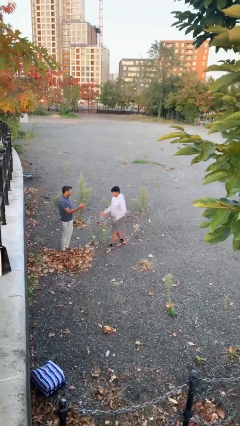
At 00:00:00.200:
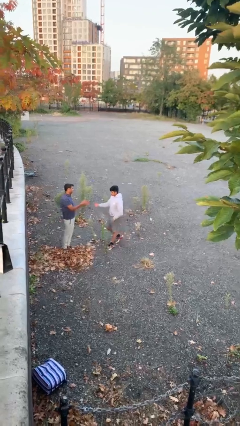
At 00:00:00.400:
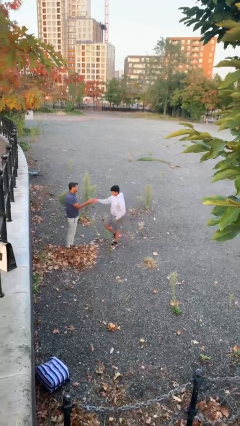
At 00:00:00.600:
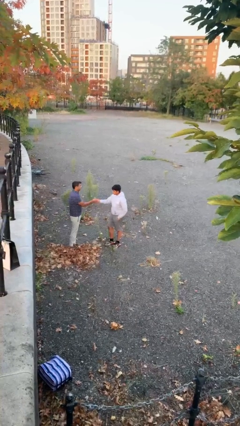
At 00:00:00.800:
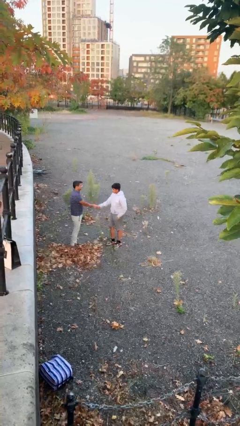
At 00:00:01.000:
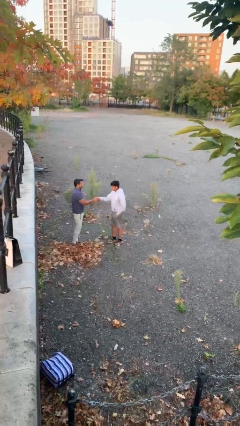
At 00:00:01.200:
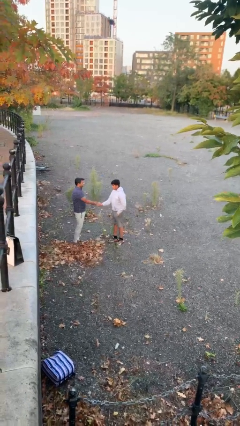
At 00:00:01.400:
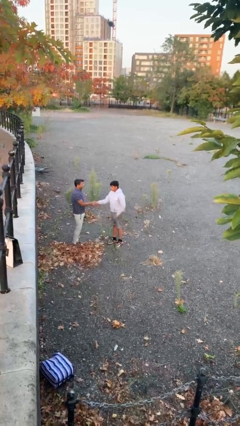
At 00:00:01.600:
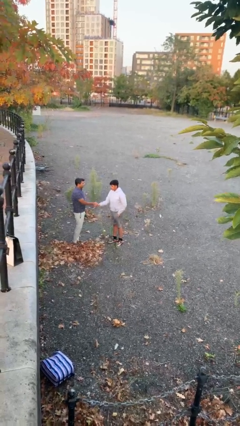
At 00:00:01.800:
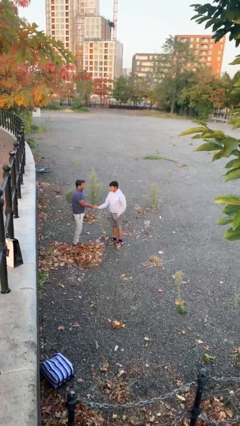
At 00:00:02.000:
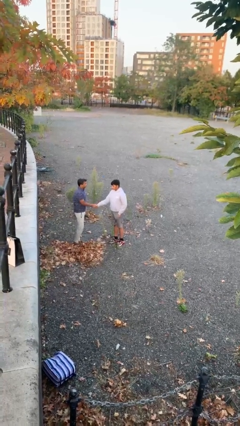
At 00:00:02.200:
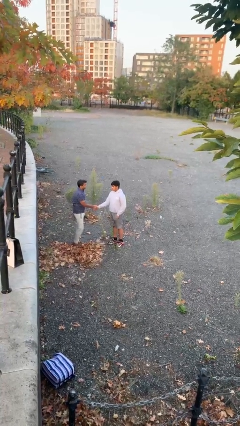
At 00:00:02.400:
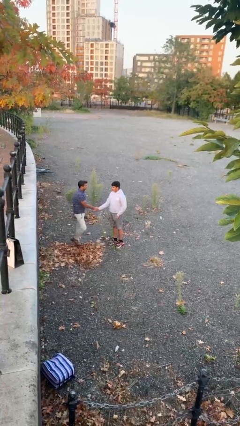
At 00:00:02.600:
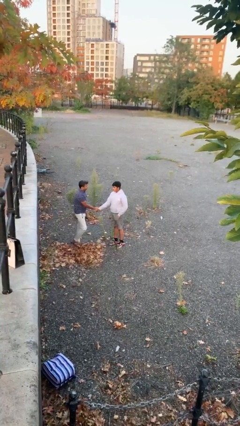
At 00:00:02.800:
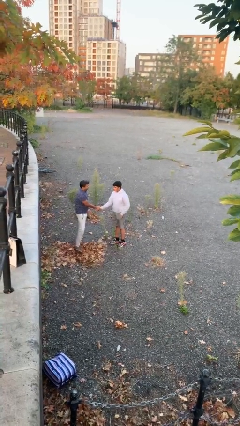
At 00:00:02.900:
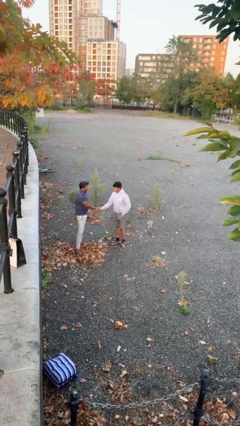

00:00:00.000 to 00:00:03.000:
person shakes hand

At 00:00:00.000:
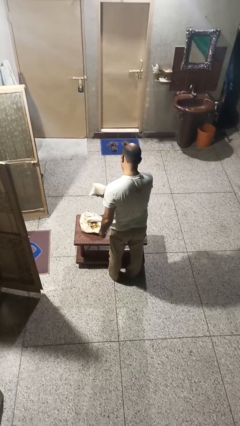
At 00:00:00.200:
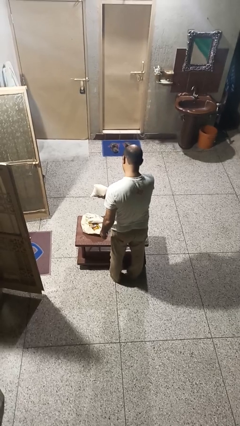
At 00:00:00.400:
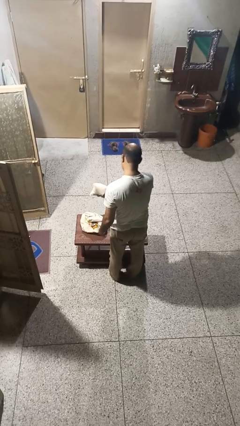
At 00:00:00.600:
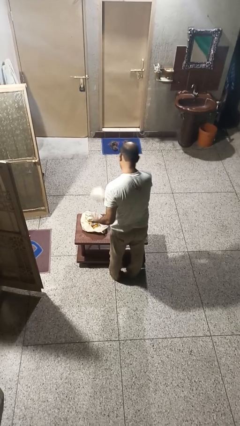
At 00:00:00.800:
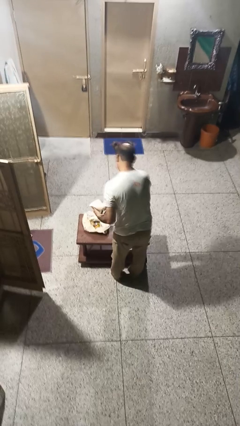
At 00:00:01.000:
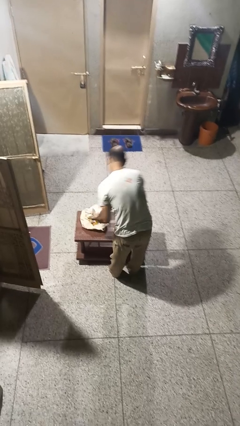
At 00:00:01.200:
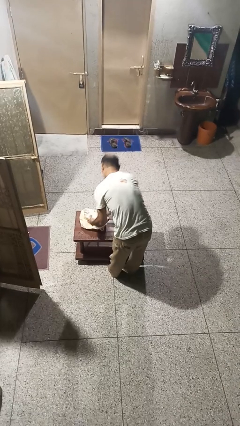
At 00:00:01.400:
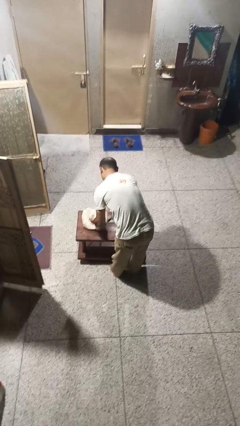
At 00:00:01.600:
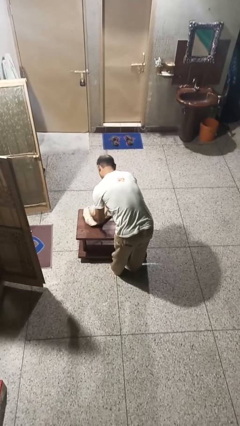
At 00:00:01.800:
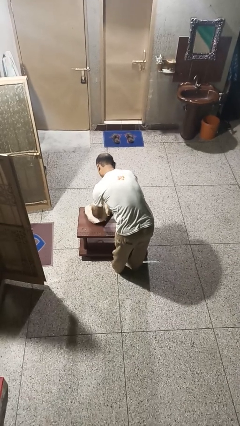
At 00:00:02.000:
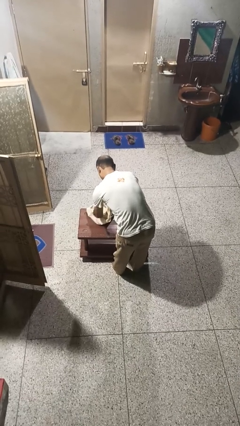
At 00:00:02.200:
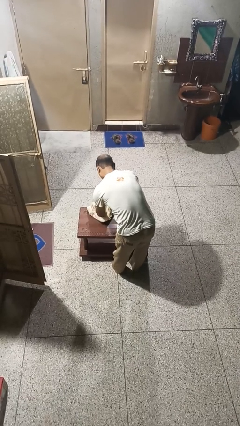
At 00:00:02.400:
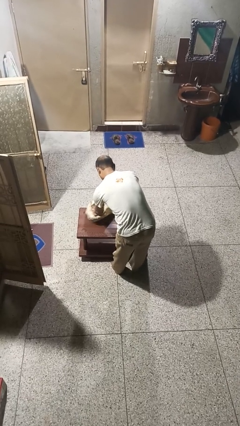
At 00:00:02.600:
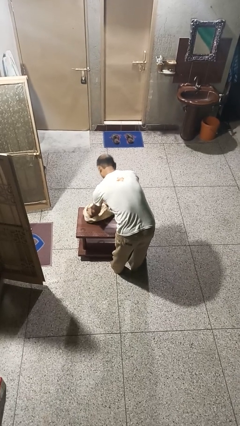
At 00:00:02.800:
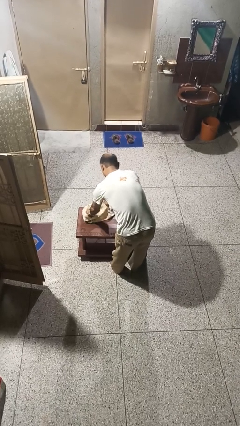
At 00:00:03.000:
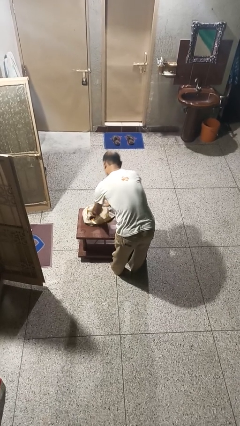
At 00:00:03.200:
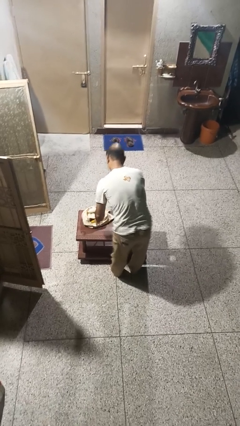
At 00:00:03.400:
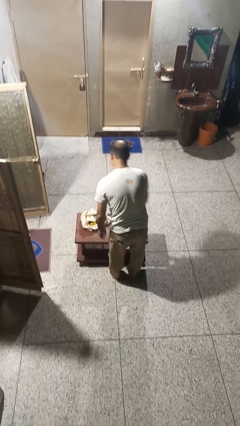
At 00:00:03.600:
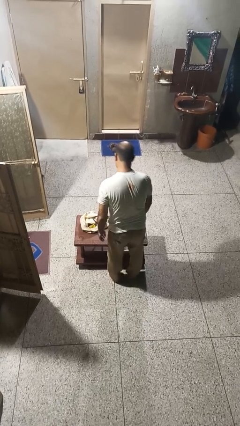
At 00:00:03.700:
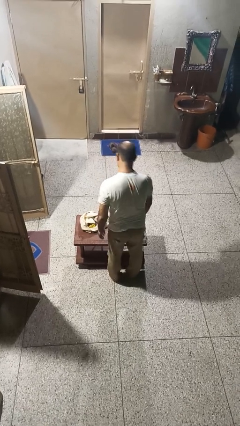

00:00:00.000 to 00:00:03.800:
person puts object into bag

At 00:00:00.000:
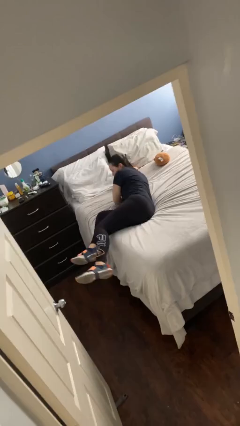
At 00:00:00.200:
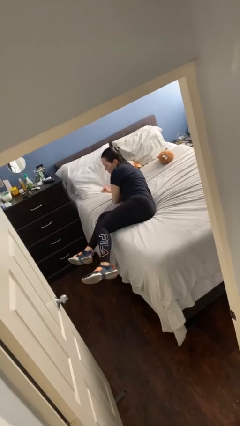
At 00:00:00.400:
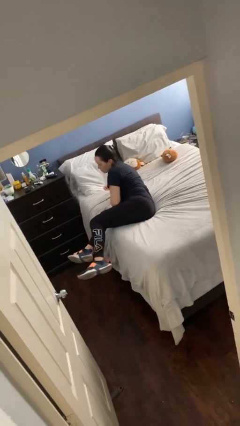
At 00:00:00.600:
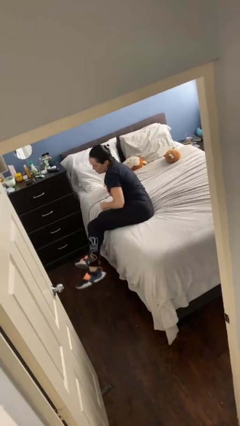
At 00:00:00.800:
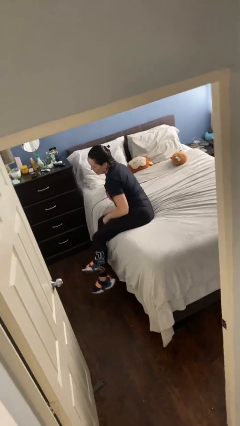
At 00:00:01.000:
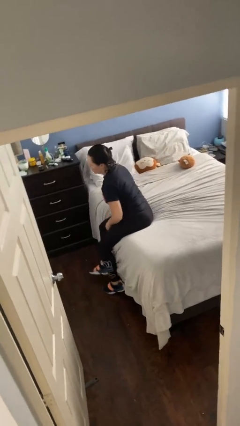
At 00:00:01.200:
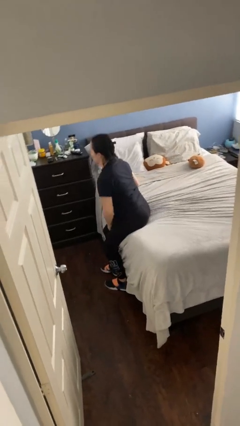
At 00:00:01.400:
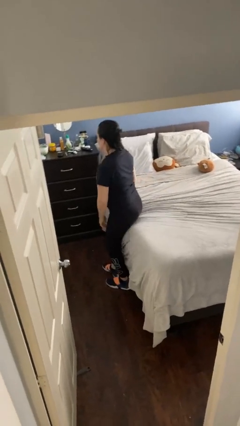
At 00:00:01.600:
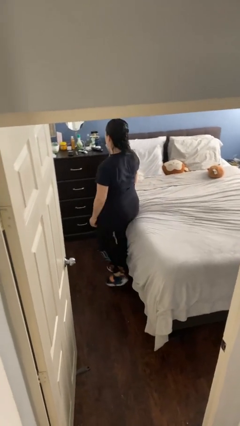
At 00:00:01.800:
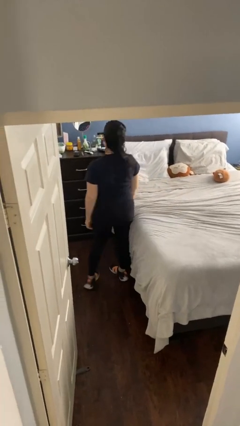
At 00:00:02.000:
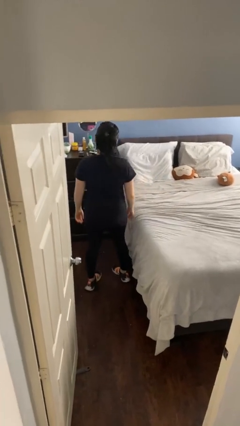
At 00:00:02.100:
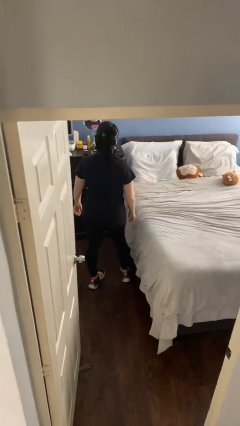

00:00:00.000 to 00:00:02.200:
person stands up

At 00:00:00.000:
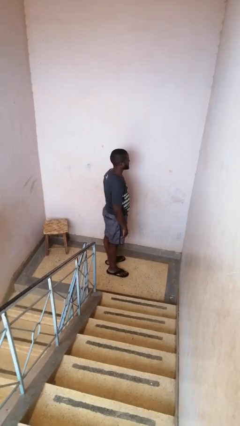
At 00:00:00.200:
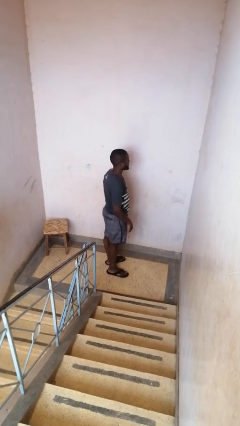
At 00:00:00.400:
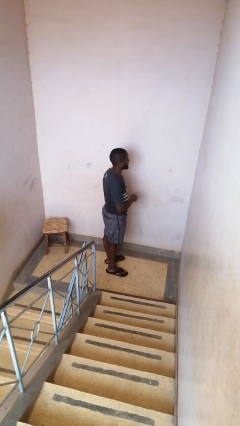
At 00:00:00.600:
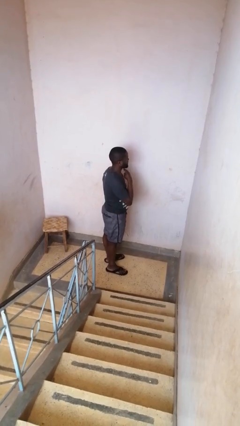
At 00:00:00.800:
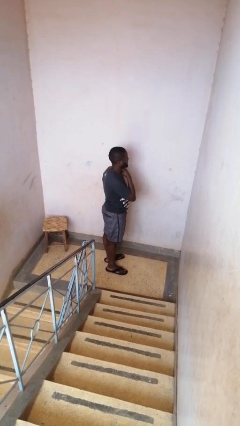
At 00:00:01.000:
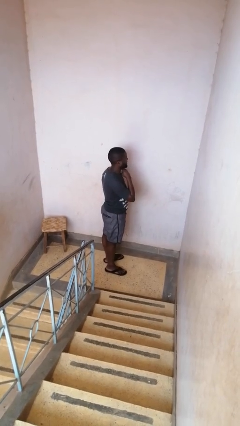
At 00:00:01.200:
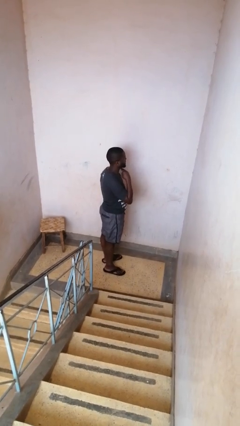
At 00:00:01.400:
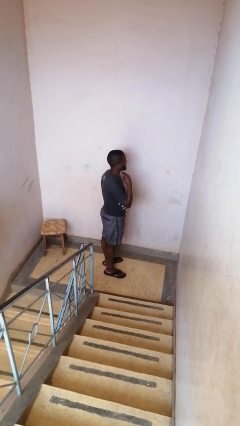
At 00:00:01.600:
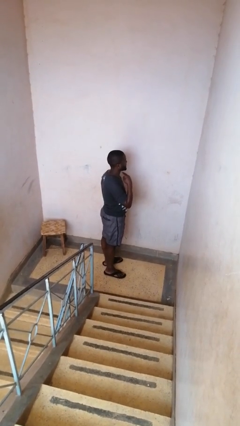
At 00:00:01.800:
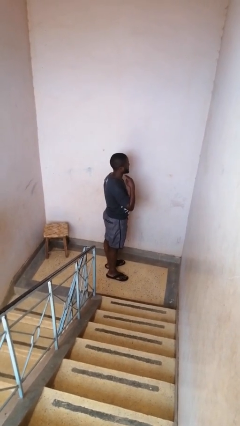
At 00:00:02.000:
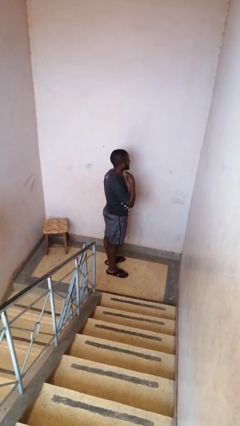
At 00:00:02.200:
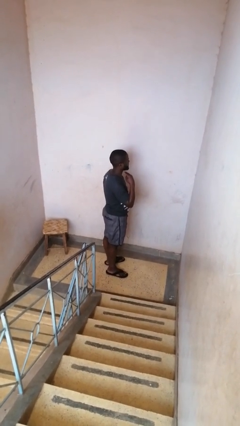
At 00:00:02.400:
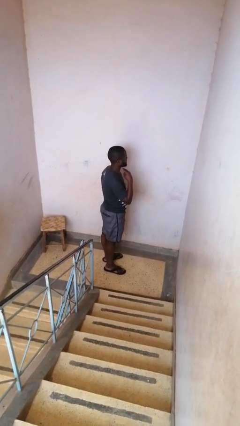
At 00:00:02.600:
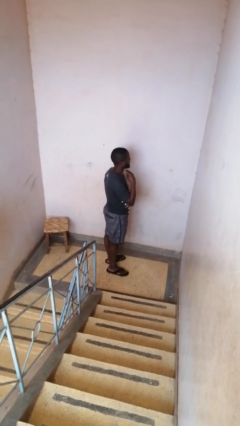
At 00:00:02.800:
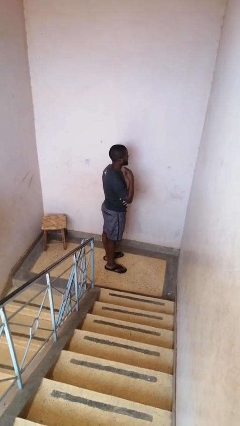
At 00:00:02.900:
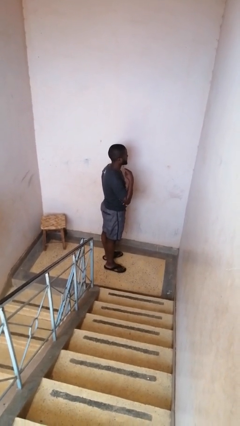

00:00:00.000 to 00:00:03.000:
person gestures cut

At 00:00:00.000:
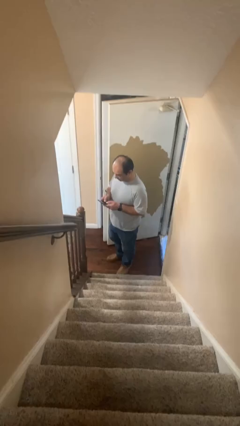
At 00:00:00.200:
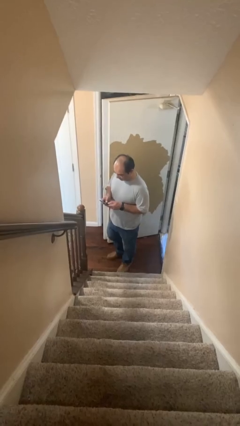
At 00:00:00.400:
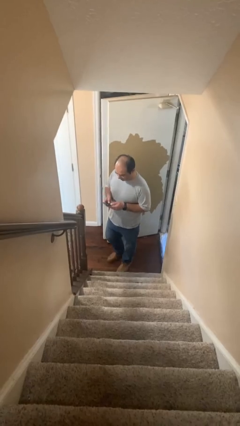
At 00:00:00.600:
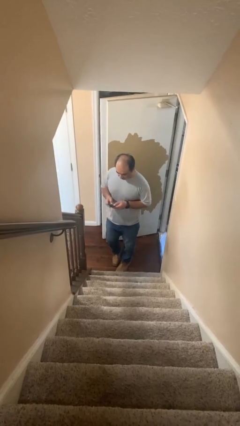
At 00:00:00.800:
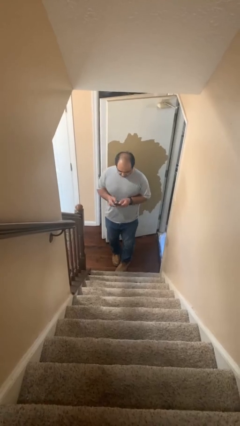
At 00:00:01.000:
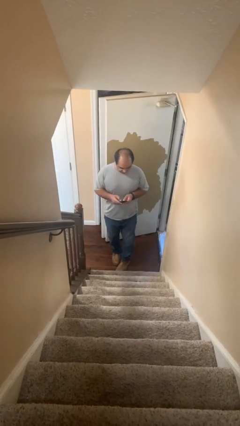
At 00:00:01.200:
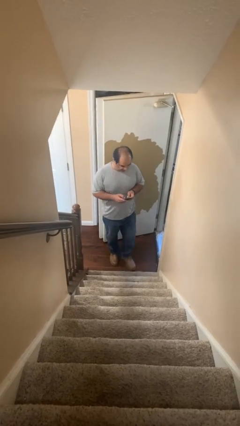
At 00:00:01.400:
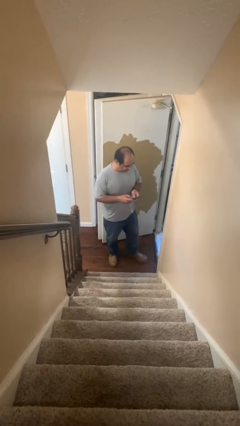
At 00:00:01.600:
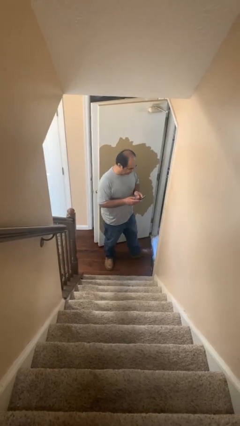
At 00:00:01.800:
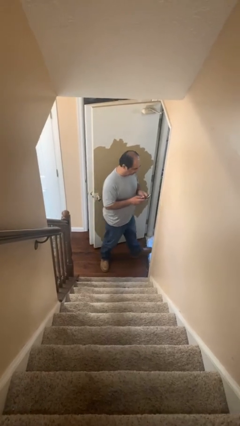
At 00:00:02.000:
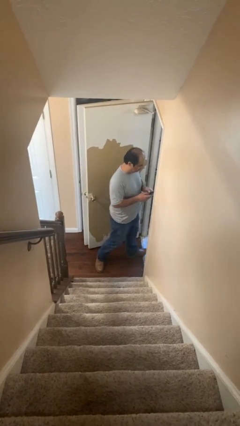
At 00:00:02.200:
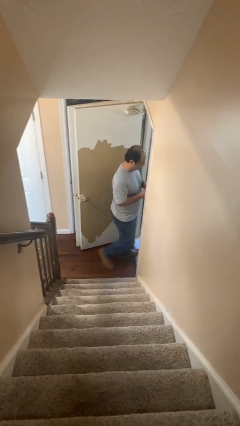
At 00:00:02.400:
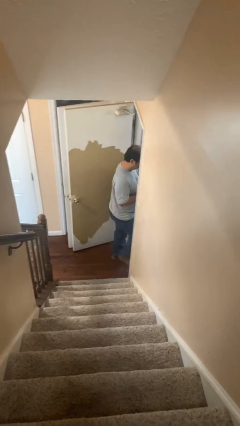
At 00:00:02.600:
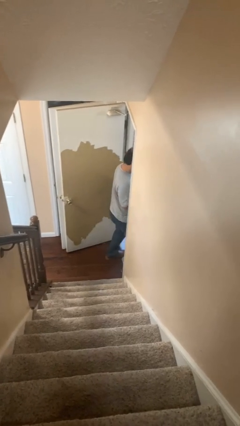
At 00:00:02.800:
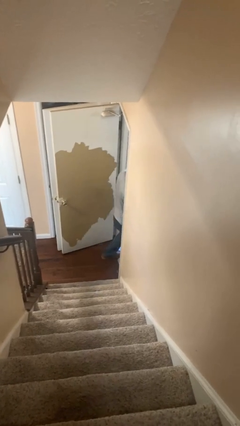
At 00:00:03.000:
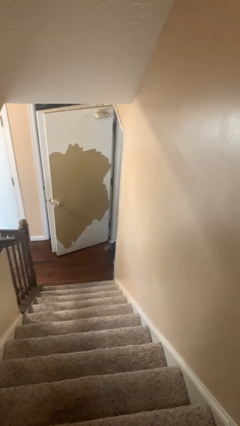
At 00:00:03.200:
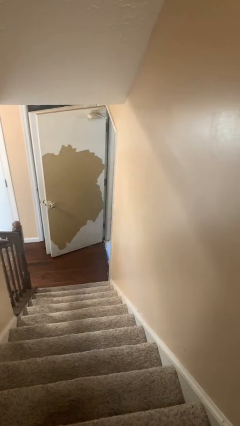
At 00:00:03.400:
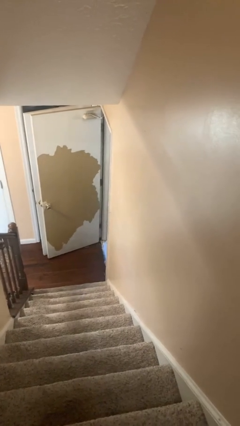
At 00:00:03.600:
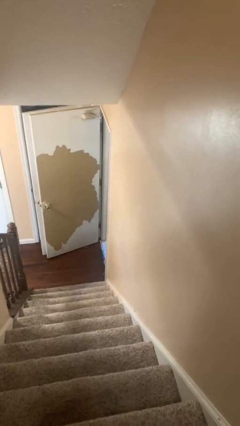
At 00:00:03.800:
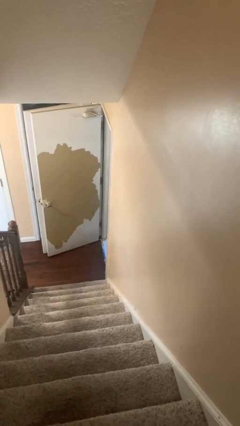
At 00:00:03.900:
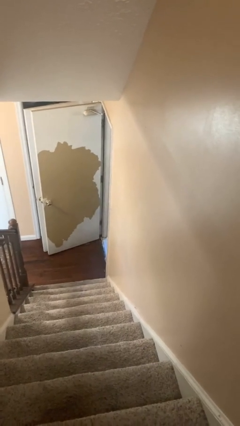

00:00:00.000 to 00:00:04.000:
person exits scene through structure

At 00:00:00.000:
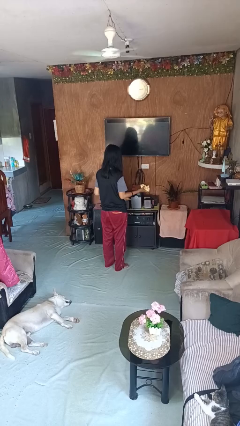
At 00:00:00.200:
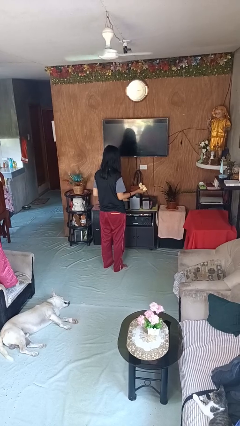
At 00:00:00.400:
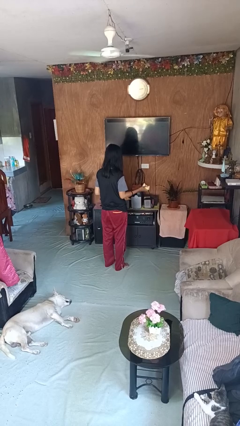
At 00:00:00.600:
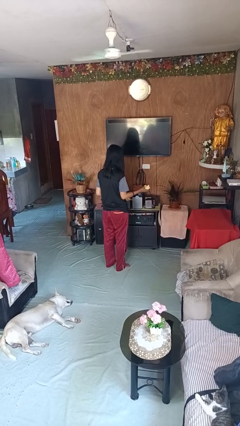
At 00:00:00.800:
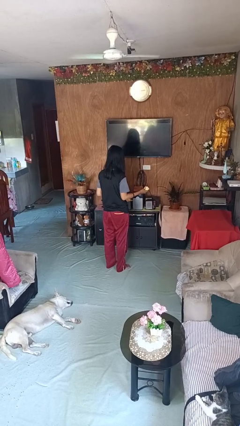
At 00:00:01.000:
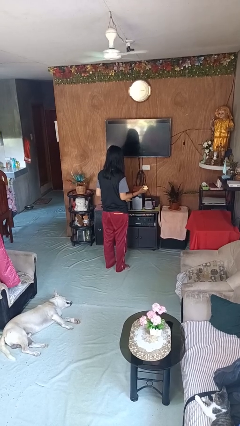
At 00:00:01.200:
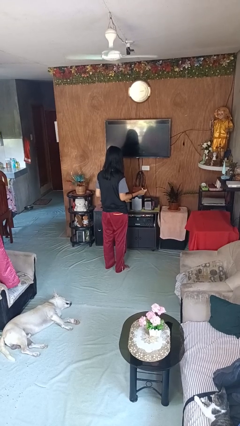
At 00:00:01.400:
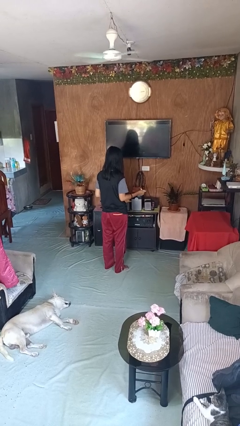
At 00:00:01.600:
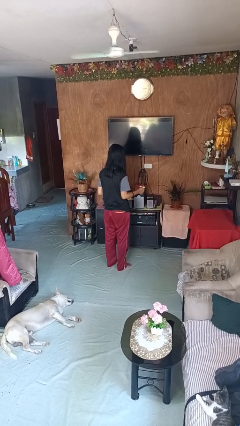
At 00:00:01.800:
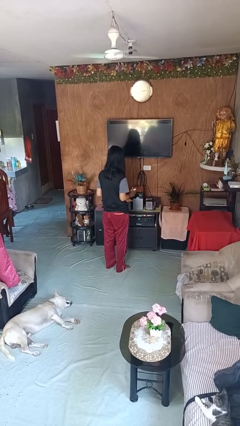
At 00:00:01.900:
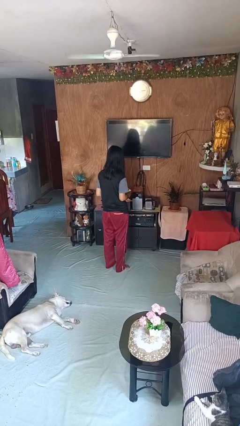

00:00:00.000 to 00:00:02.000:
person crumples paper
